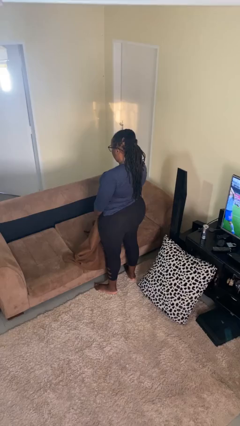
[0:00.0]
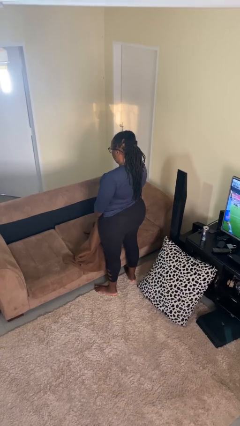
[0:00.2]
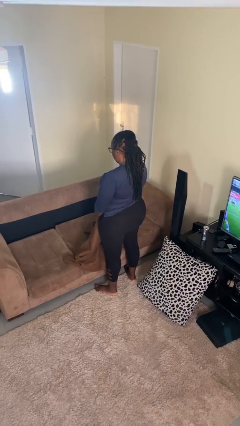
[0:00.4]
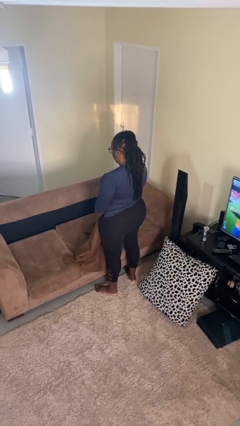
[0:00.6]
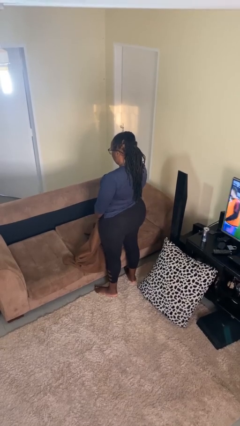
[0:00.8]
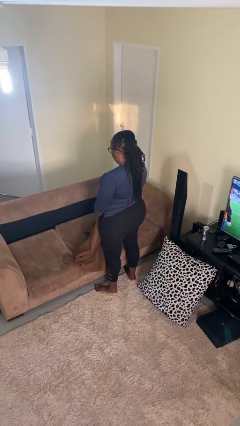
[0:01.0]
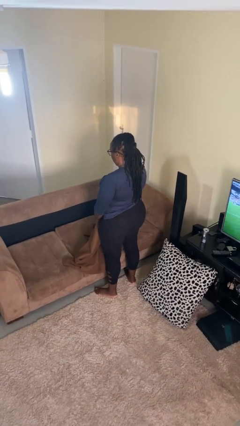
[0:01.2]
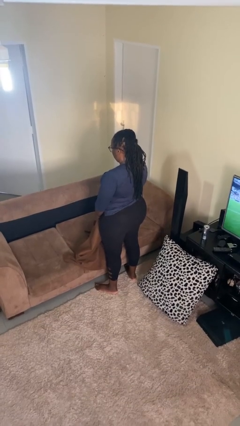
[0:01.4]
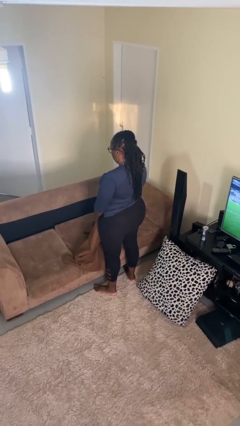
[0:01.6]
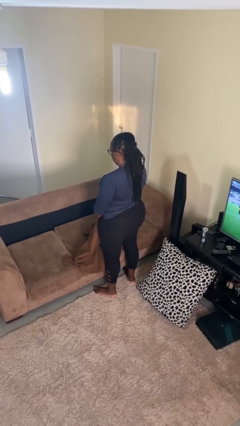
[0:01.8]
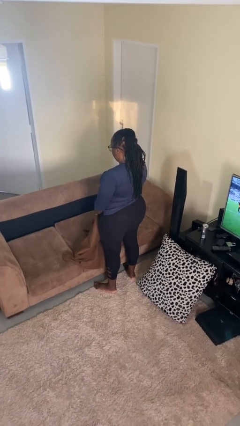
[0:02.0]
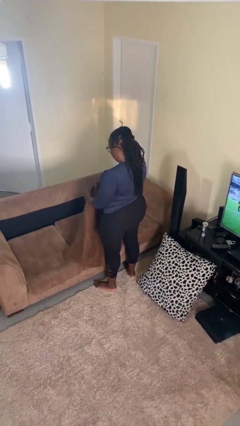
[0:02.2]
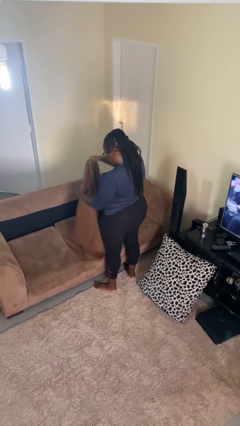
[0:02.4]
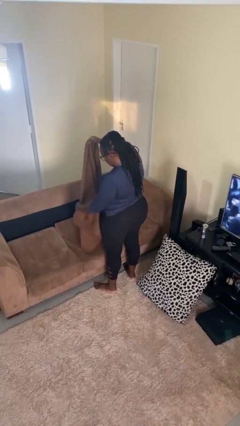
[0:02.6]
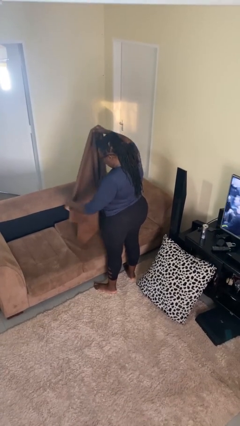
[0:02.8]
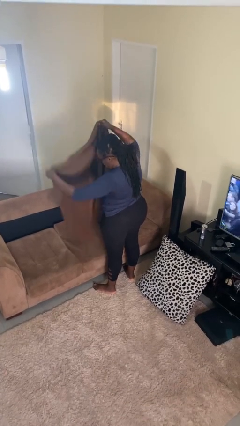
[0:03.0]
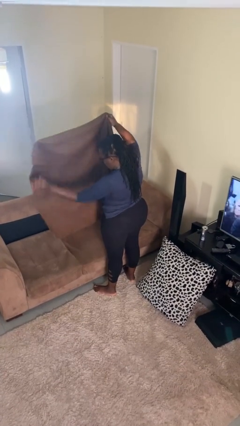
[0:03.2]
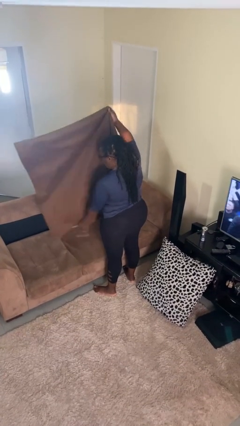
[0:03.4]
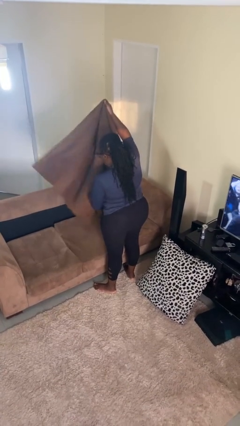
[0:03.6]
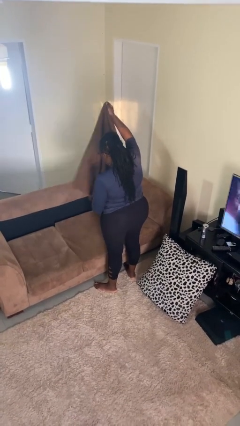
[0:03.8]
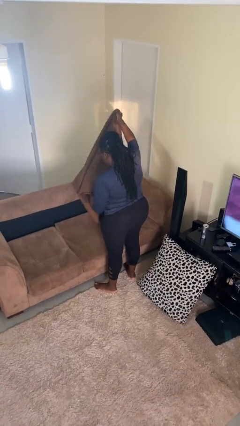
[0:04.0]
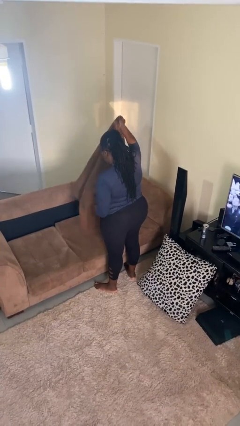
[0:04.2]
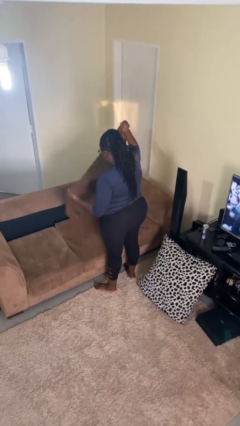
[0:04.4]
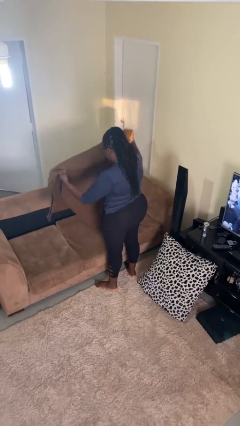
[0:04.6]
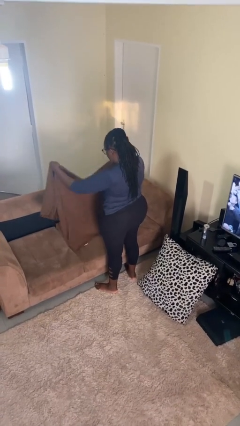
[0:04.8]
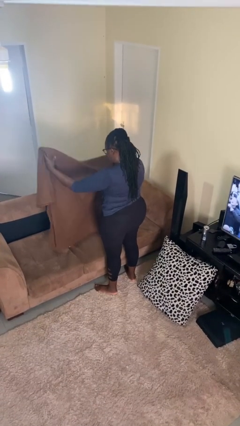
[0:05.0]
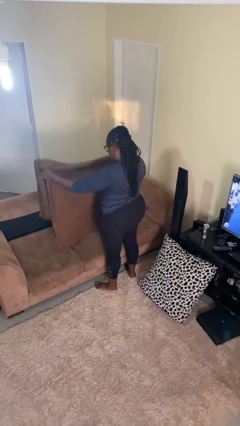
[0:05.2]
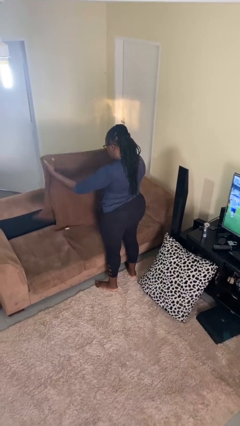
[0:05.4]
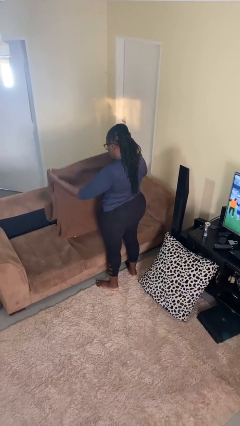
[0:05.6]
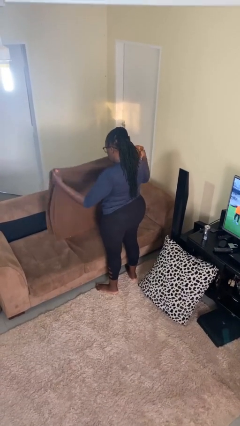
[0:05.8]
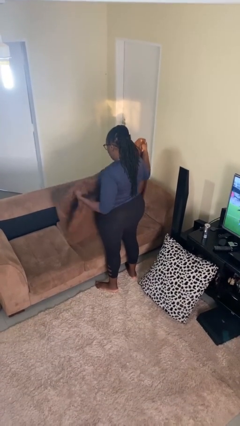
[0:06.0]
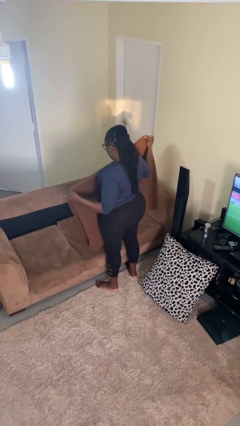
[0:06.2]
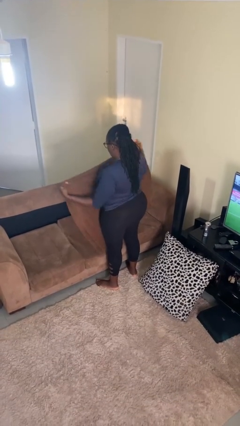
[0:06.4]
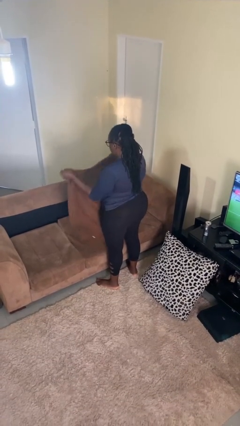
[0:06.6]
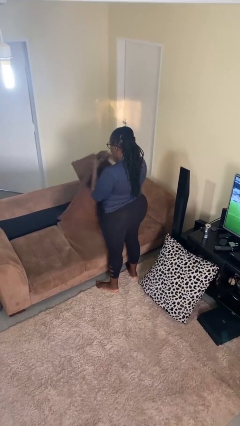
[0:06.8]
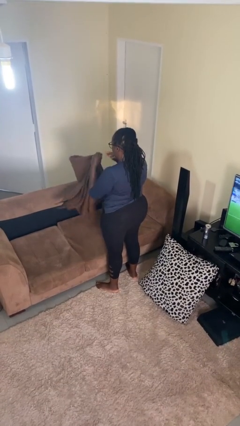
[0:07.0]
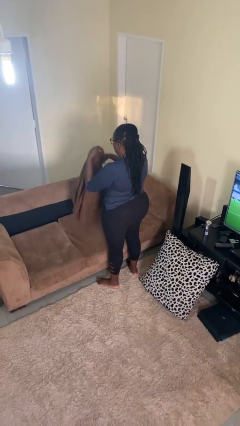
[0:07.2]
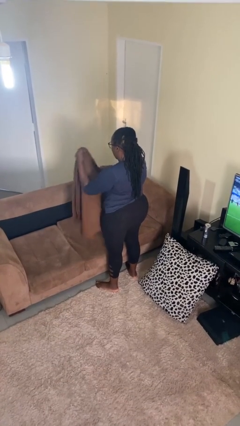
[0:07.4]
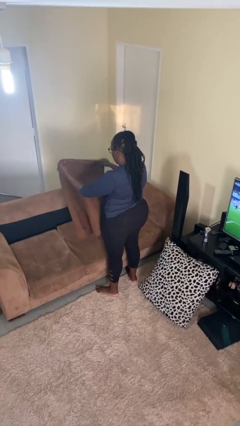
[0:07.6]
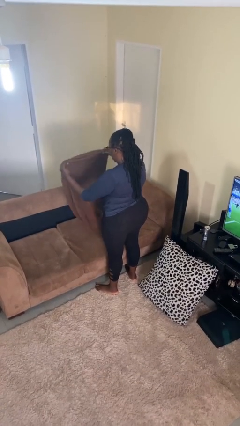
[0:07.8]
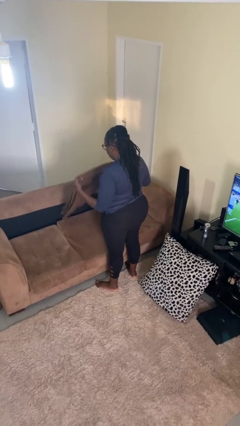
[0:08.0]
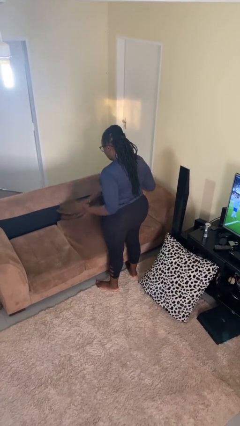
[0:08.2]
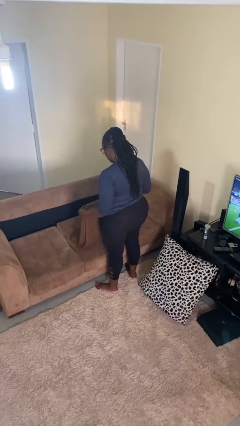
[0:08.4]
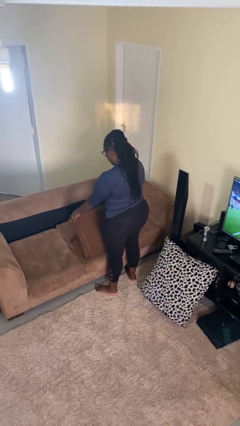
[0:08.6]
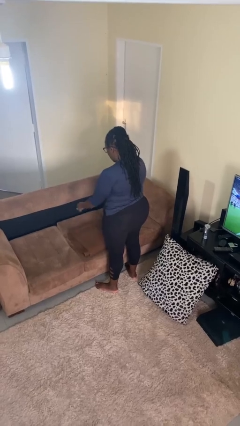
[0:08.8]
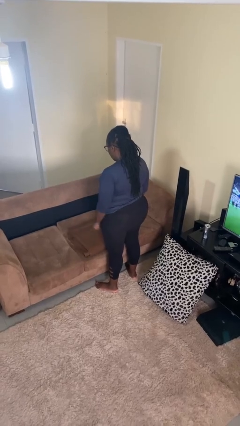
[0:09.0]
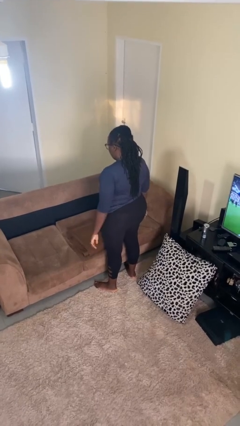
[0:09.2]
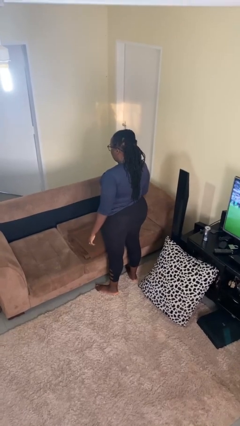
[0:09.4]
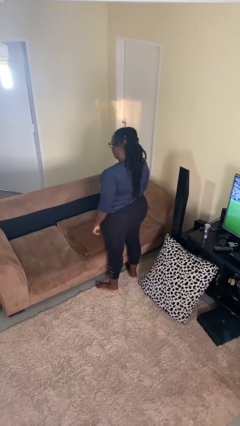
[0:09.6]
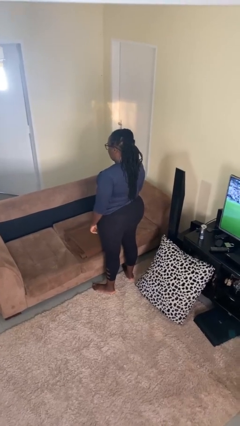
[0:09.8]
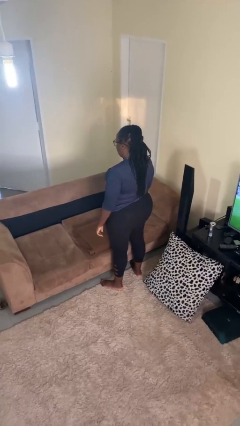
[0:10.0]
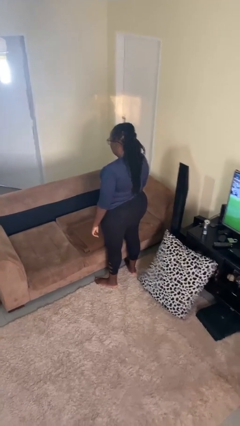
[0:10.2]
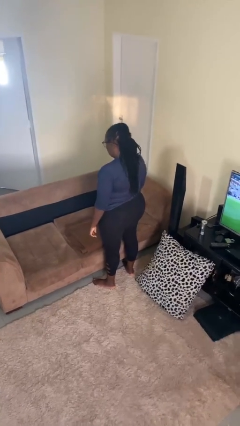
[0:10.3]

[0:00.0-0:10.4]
person folds blanket

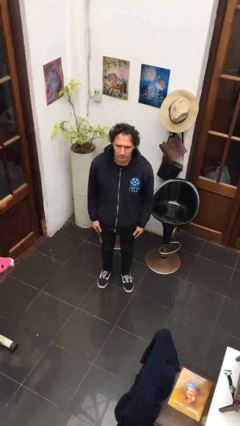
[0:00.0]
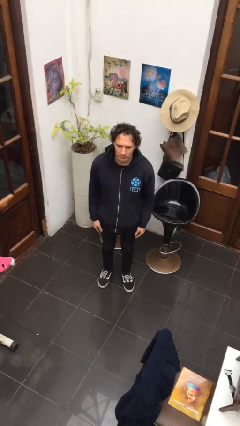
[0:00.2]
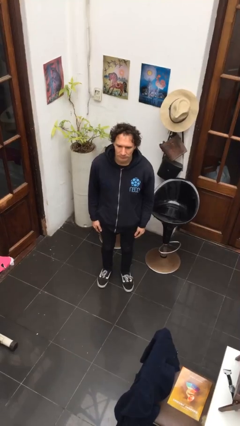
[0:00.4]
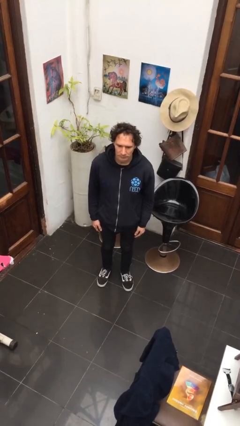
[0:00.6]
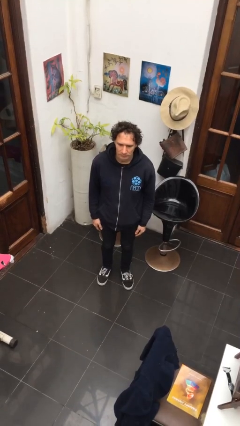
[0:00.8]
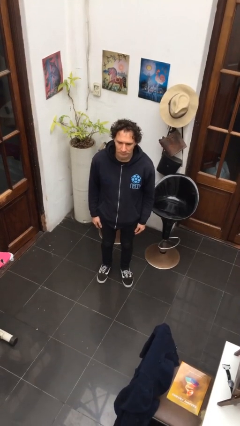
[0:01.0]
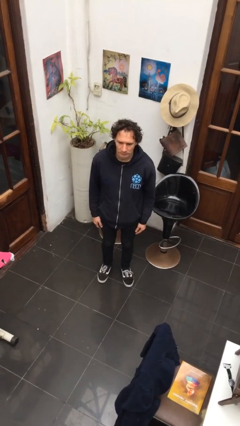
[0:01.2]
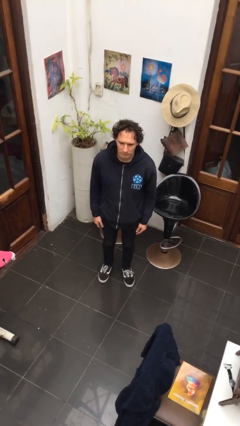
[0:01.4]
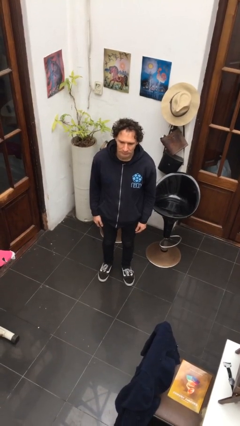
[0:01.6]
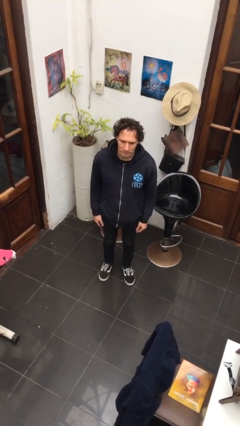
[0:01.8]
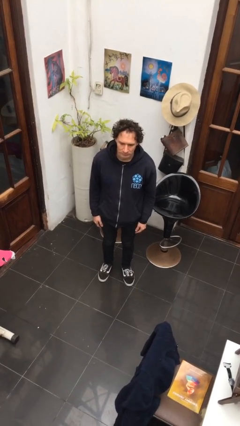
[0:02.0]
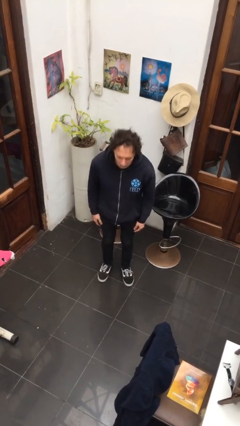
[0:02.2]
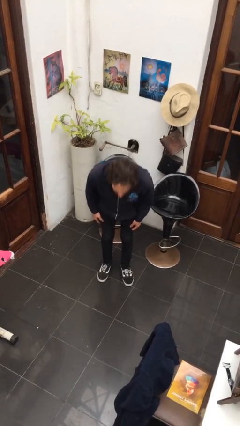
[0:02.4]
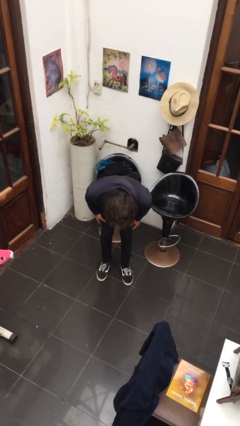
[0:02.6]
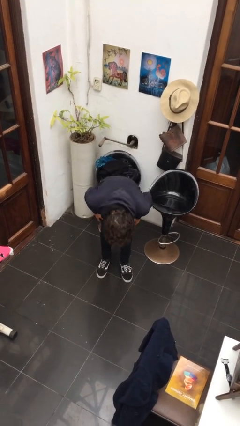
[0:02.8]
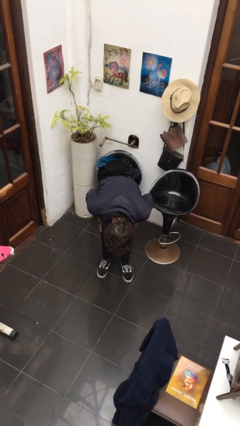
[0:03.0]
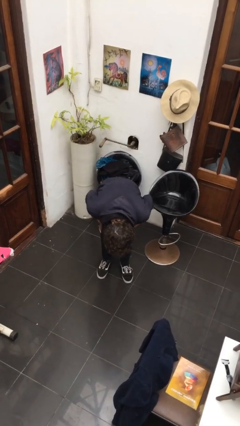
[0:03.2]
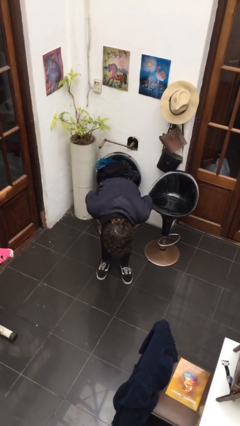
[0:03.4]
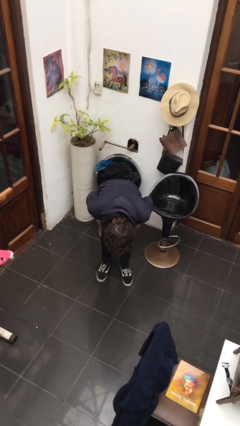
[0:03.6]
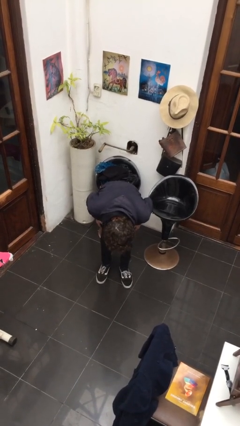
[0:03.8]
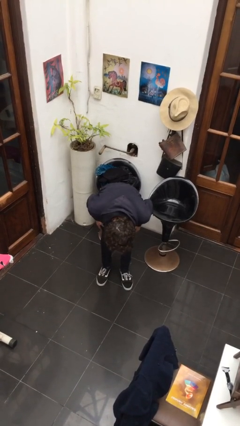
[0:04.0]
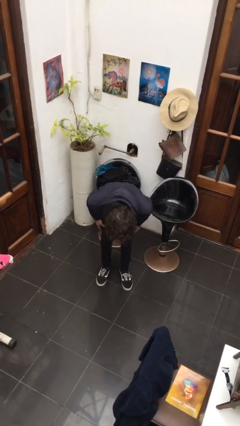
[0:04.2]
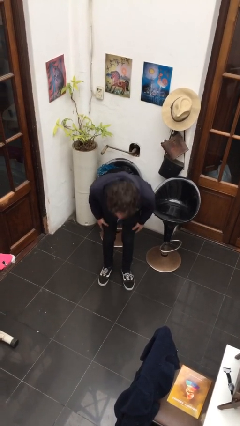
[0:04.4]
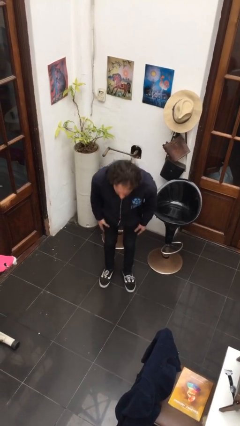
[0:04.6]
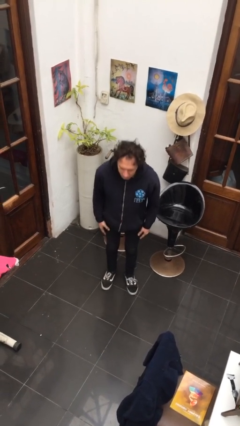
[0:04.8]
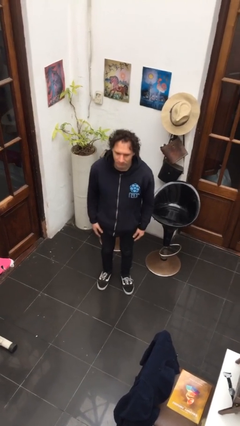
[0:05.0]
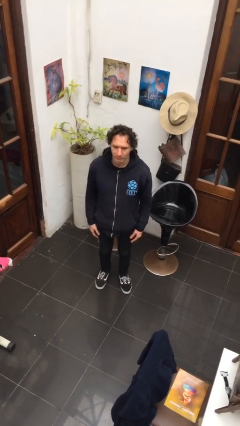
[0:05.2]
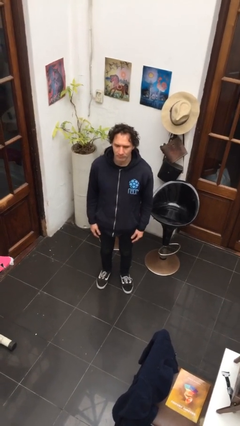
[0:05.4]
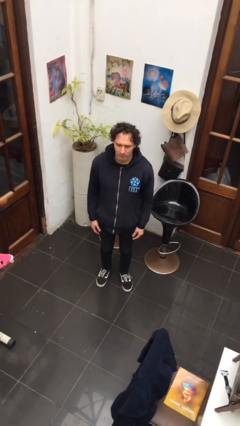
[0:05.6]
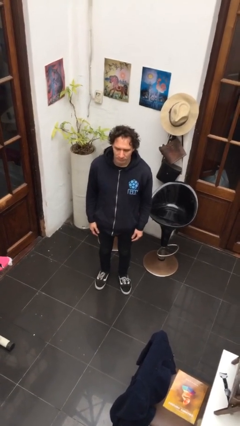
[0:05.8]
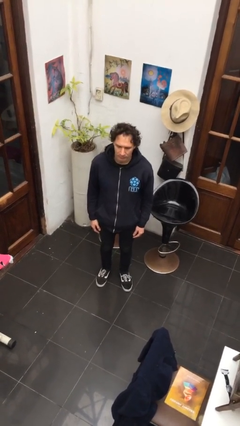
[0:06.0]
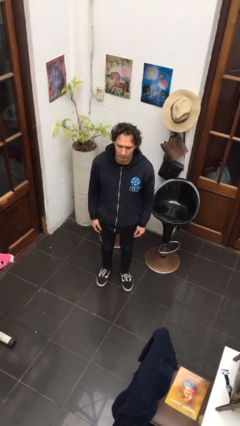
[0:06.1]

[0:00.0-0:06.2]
person bows

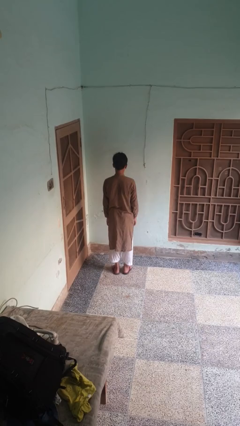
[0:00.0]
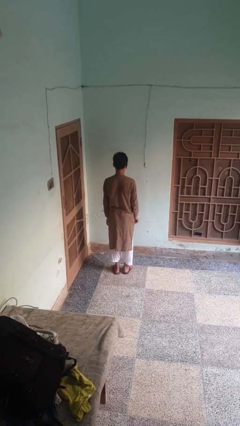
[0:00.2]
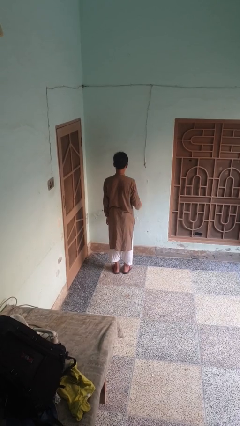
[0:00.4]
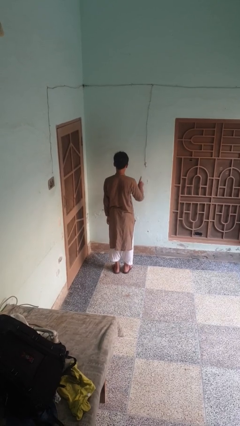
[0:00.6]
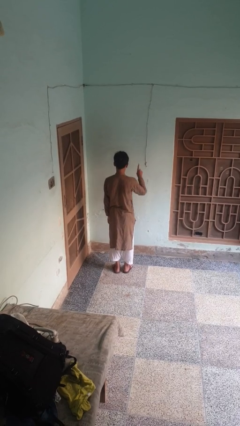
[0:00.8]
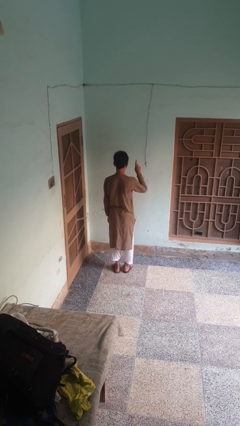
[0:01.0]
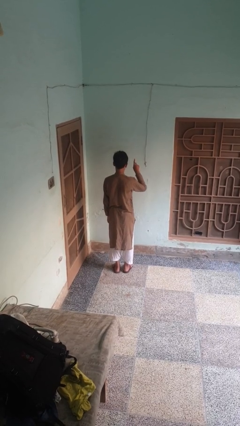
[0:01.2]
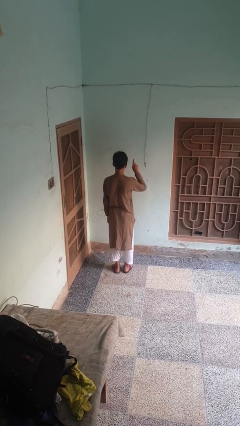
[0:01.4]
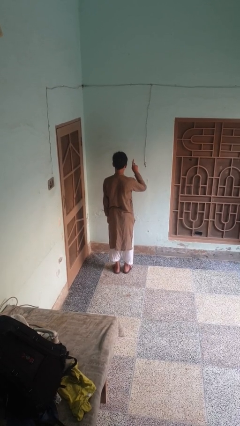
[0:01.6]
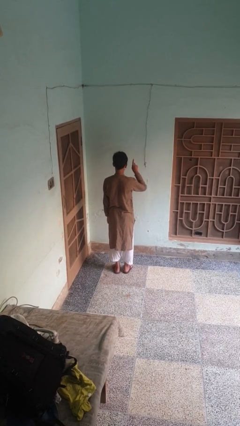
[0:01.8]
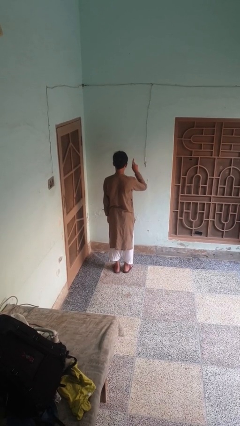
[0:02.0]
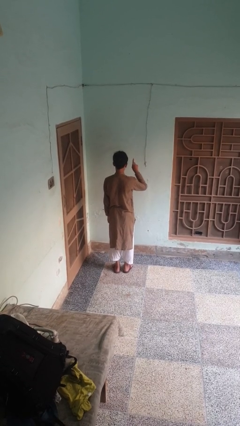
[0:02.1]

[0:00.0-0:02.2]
person gestures number one
